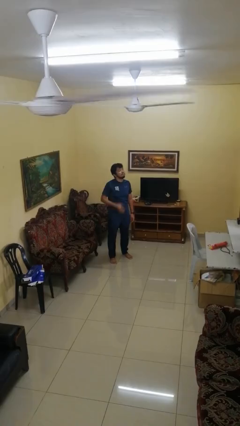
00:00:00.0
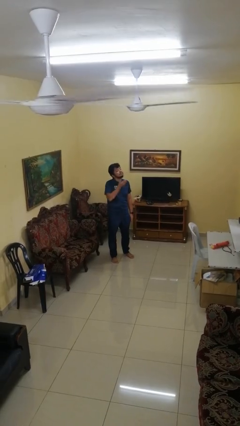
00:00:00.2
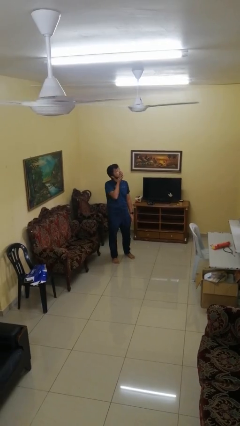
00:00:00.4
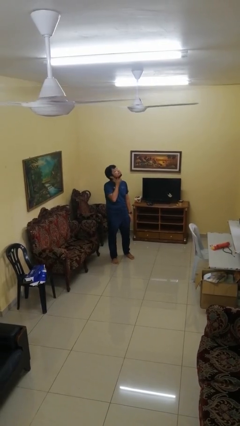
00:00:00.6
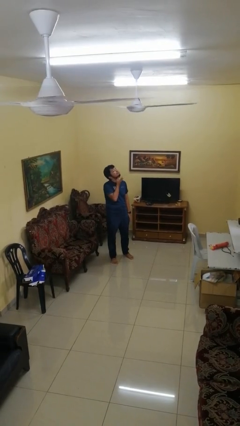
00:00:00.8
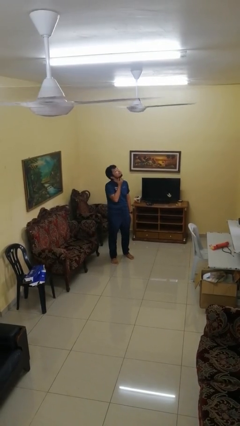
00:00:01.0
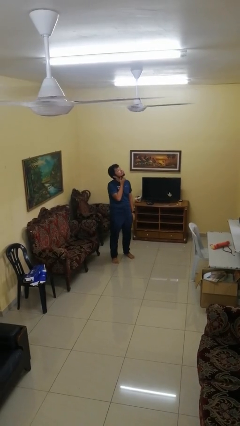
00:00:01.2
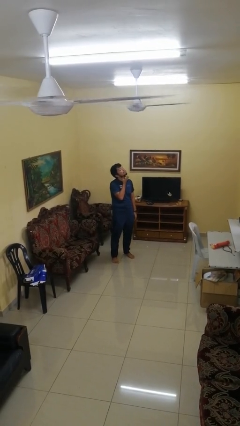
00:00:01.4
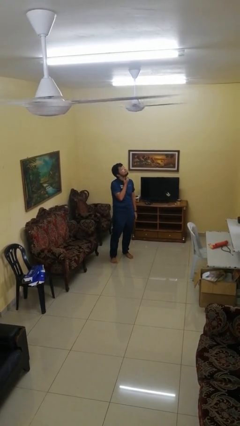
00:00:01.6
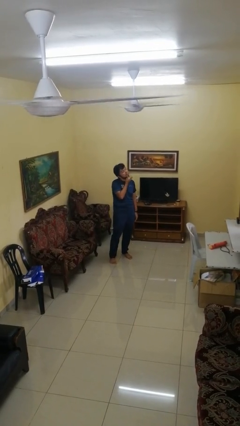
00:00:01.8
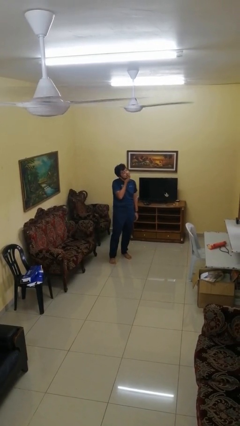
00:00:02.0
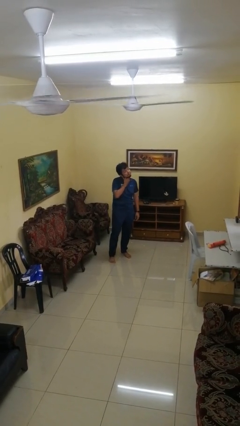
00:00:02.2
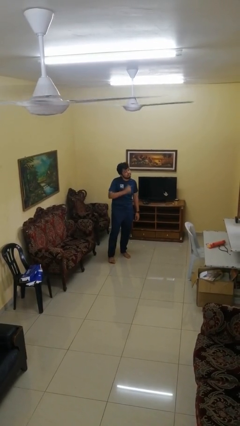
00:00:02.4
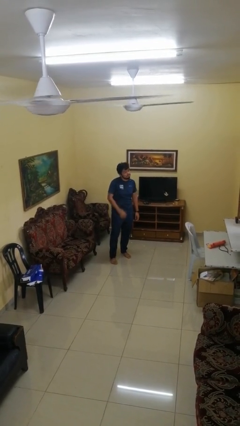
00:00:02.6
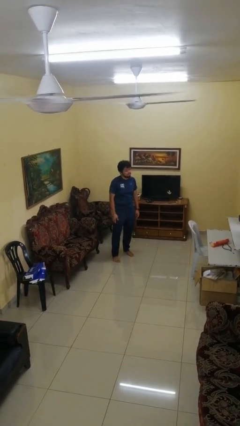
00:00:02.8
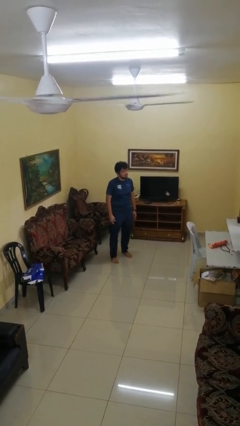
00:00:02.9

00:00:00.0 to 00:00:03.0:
person scratches face

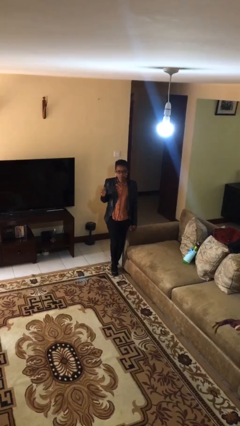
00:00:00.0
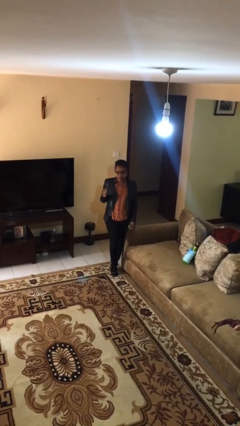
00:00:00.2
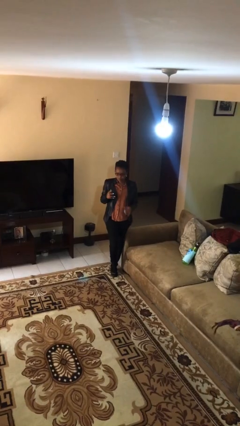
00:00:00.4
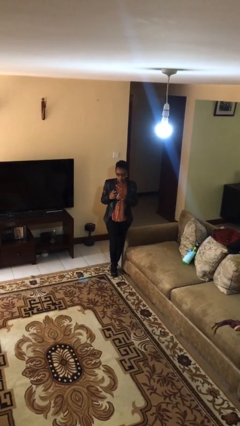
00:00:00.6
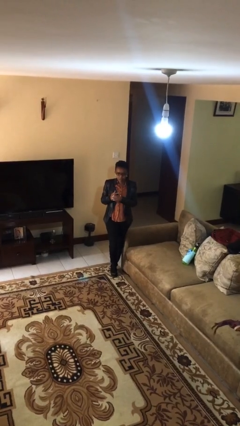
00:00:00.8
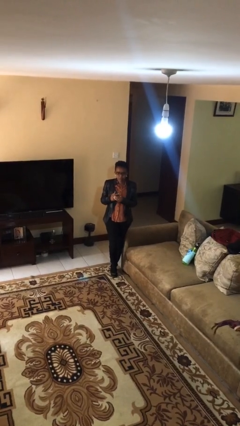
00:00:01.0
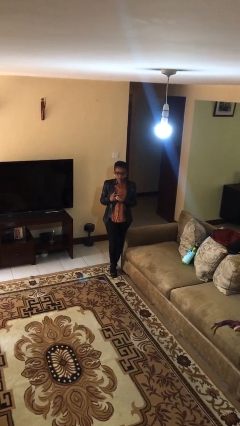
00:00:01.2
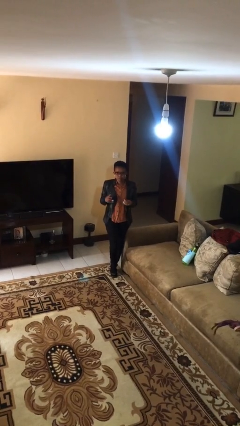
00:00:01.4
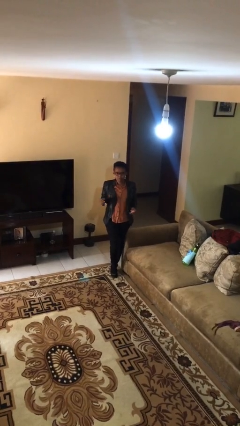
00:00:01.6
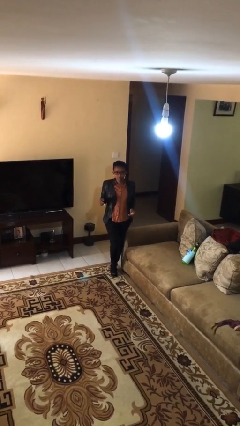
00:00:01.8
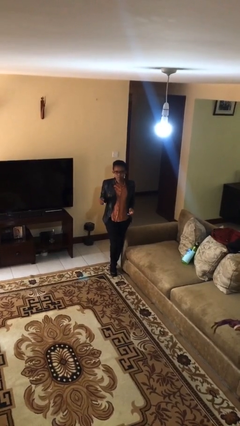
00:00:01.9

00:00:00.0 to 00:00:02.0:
person takes off ring

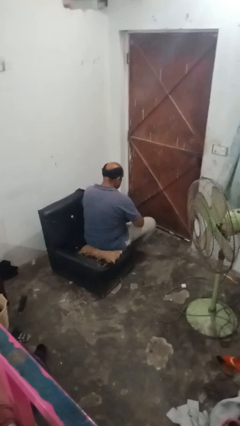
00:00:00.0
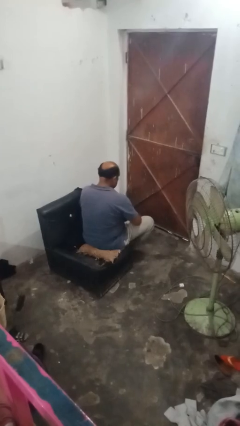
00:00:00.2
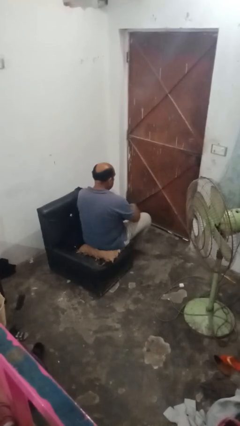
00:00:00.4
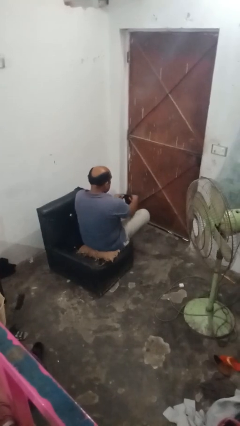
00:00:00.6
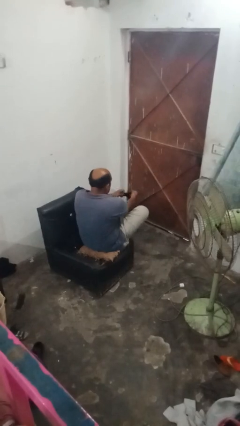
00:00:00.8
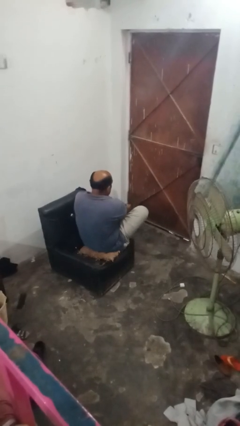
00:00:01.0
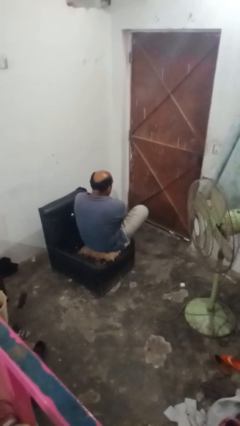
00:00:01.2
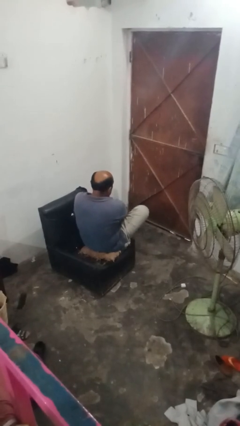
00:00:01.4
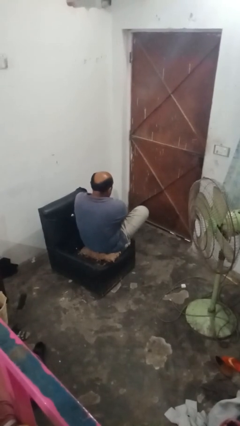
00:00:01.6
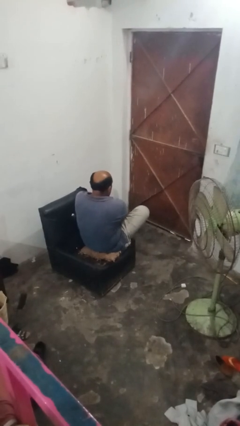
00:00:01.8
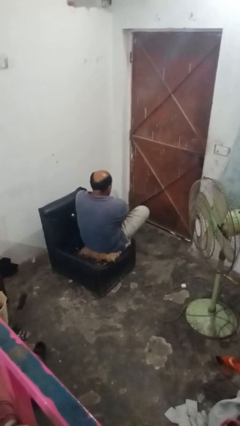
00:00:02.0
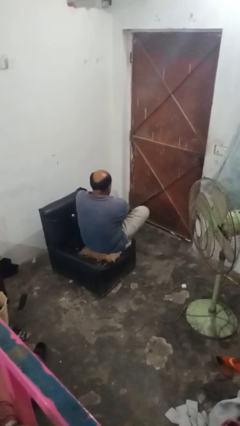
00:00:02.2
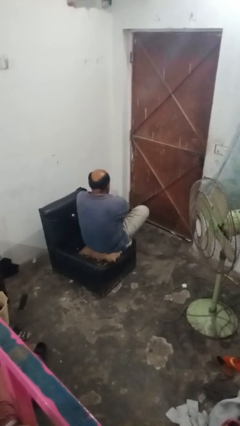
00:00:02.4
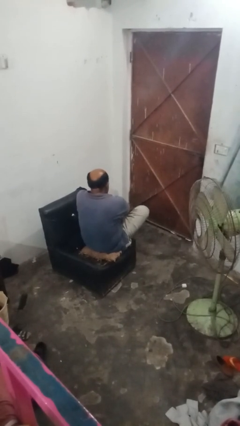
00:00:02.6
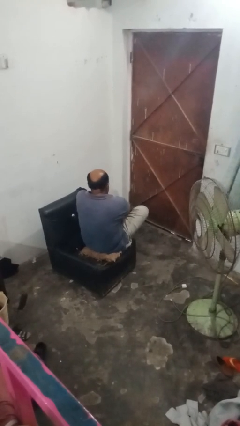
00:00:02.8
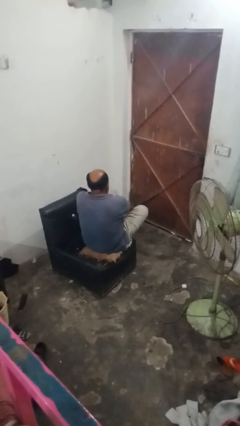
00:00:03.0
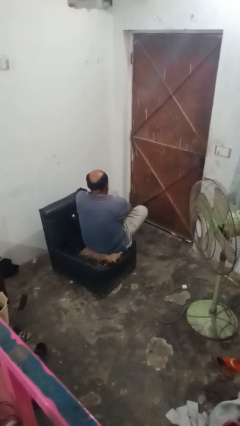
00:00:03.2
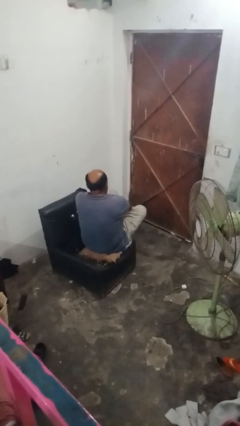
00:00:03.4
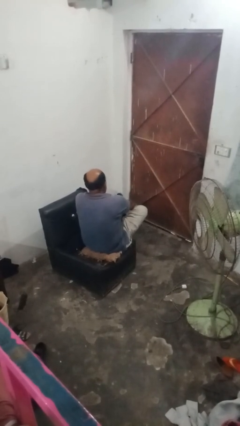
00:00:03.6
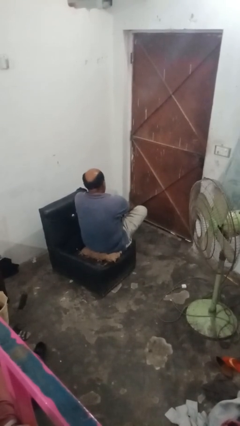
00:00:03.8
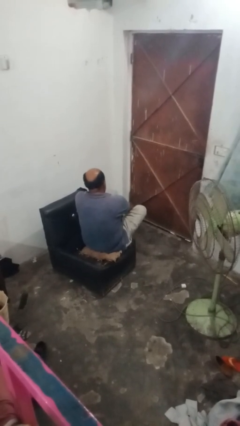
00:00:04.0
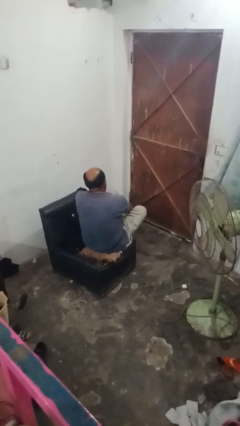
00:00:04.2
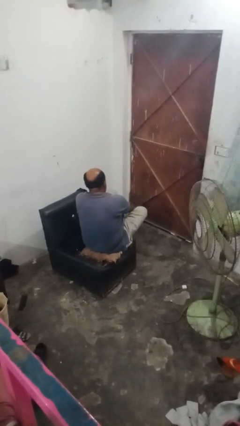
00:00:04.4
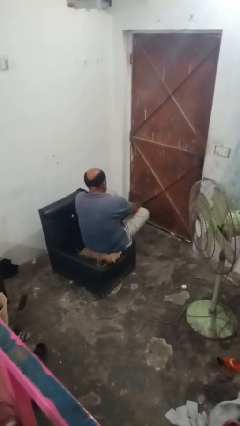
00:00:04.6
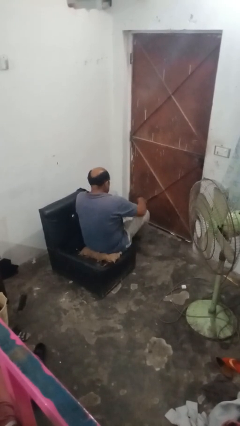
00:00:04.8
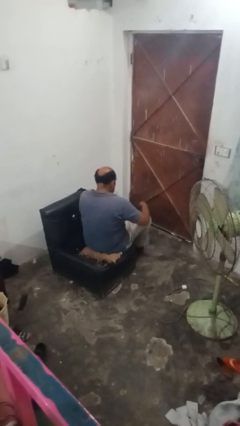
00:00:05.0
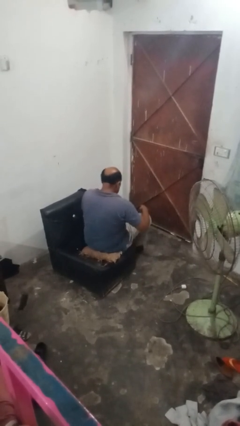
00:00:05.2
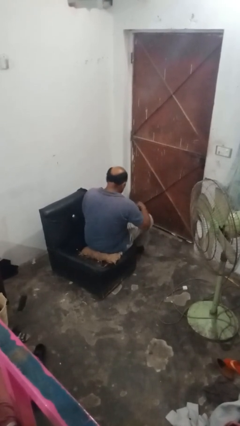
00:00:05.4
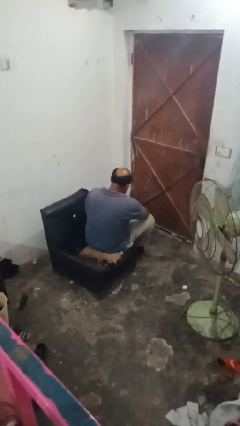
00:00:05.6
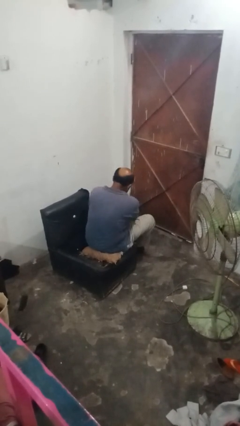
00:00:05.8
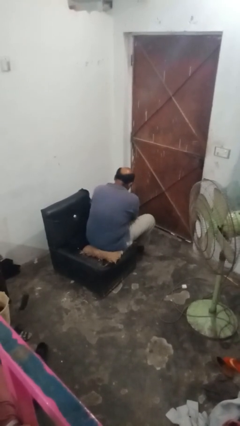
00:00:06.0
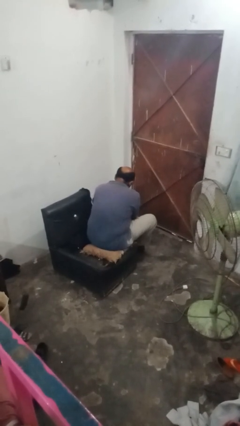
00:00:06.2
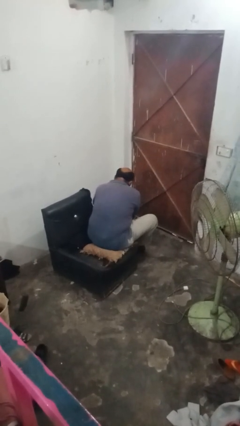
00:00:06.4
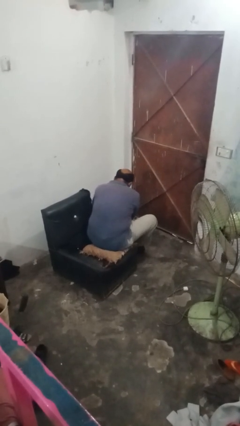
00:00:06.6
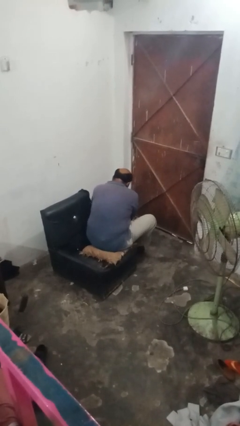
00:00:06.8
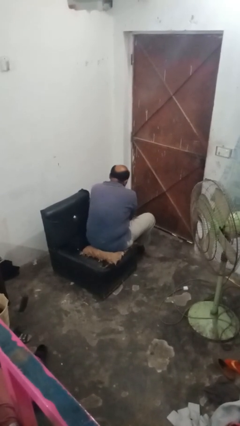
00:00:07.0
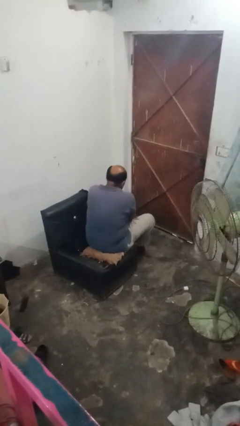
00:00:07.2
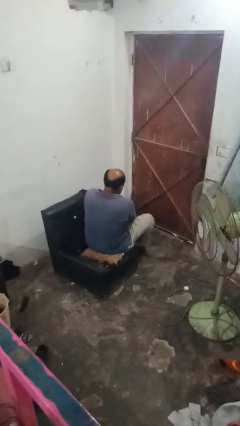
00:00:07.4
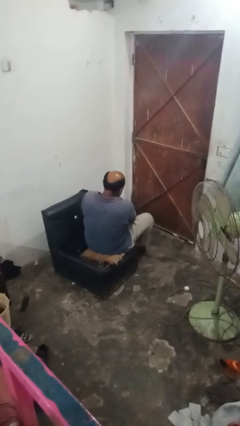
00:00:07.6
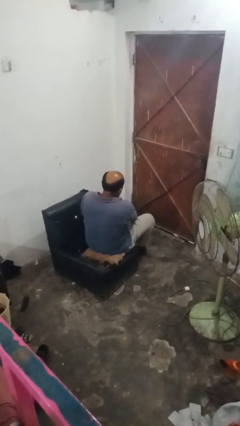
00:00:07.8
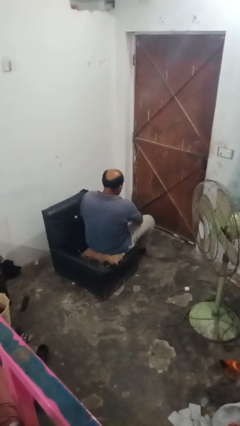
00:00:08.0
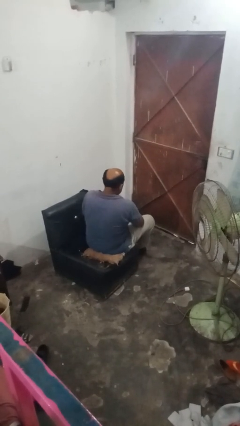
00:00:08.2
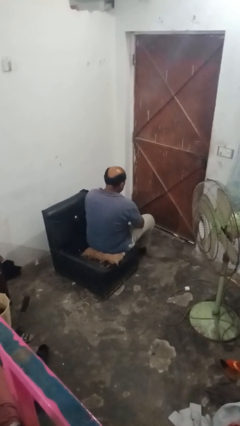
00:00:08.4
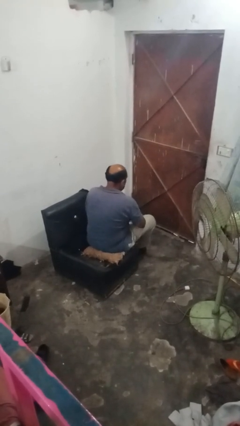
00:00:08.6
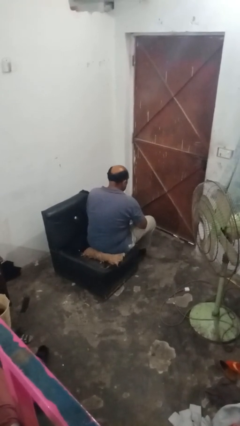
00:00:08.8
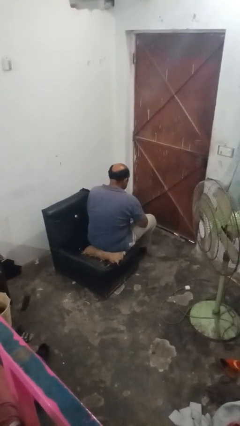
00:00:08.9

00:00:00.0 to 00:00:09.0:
person puts on socks

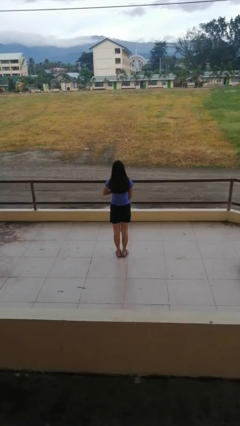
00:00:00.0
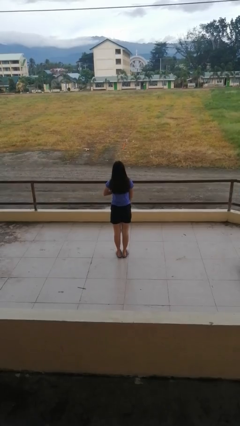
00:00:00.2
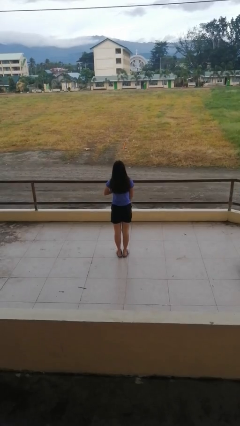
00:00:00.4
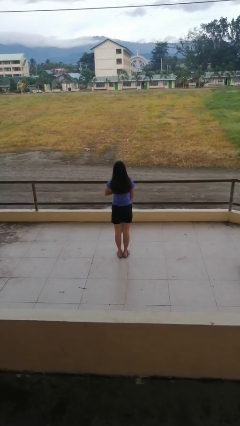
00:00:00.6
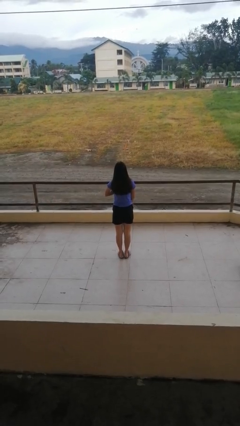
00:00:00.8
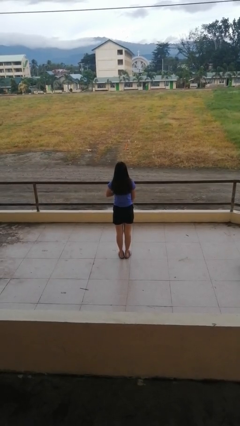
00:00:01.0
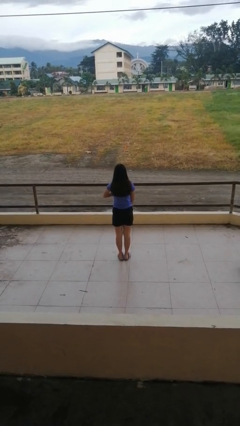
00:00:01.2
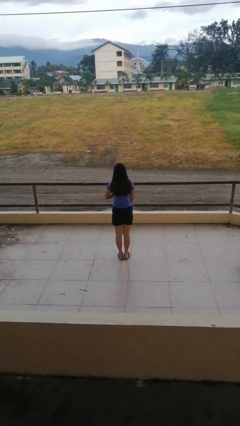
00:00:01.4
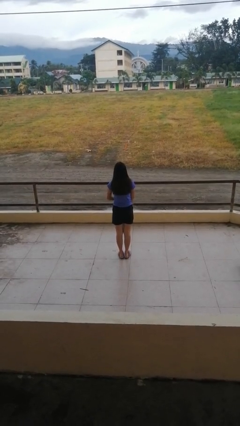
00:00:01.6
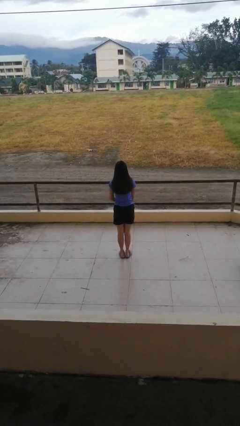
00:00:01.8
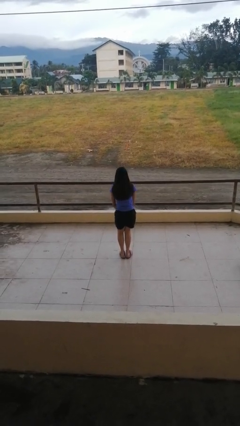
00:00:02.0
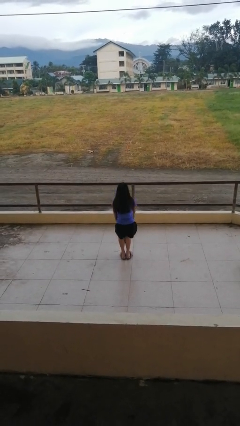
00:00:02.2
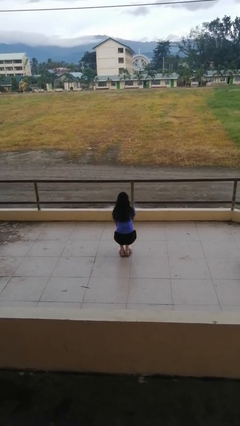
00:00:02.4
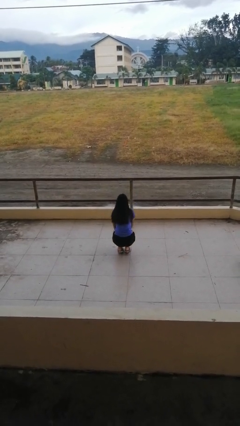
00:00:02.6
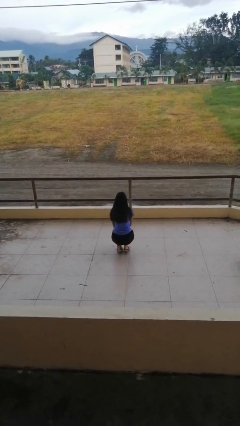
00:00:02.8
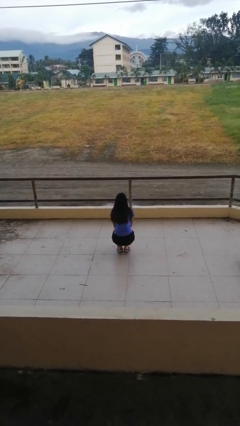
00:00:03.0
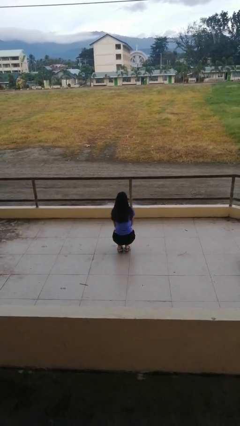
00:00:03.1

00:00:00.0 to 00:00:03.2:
person squats

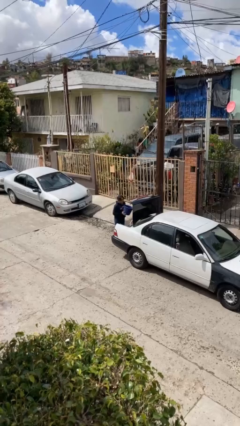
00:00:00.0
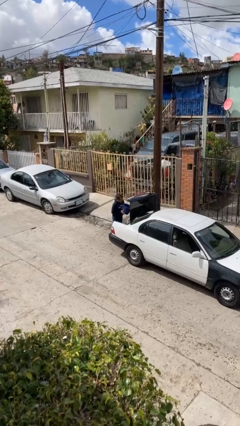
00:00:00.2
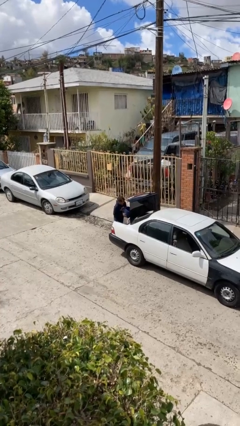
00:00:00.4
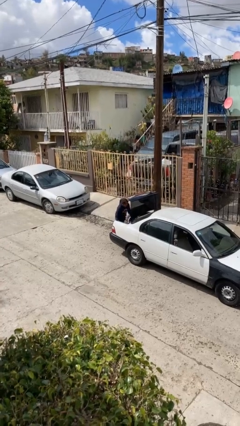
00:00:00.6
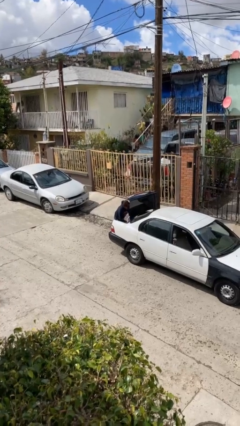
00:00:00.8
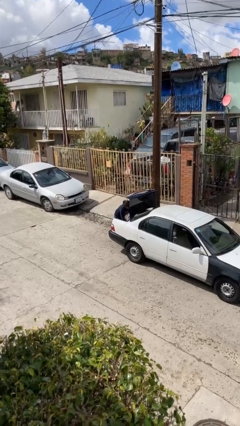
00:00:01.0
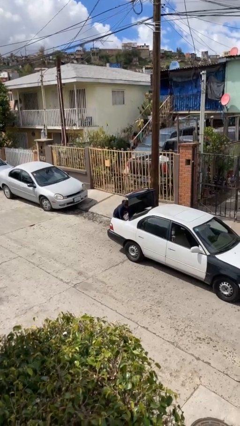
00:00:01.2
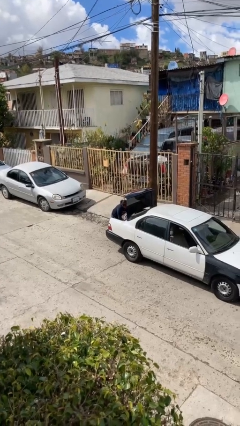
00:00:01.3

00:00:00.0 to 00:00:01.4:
person loads car
